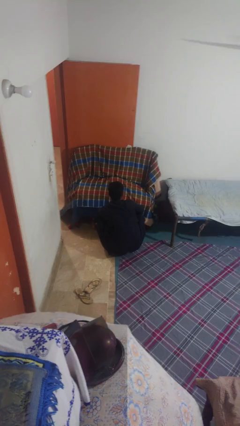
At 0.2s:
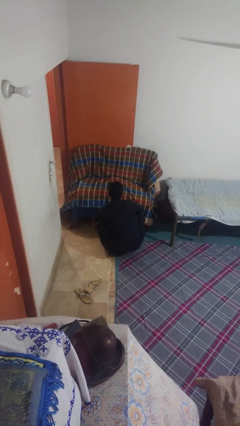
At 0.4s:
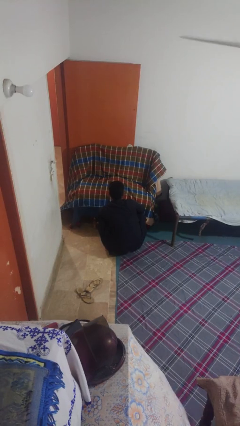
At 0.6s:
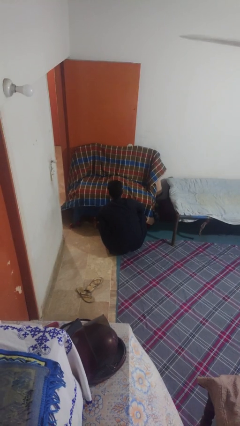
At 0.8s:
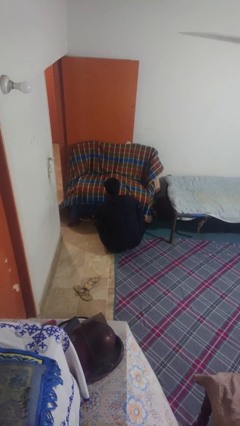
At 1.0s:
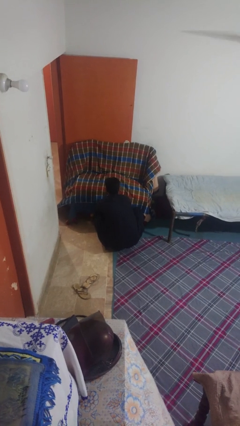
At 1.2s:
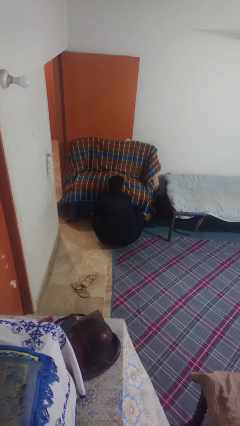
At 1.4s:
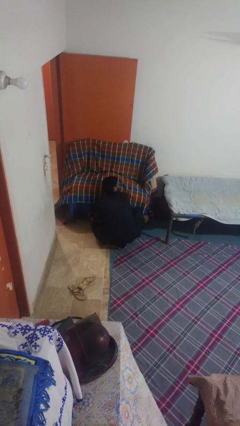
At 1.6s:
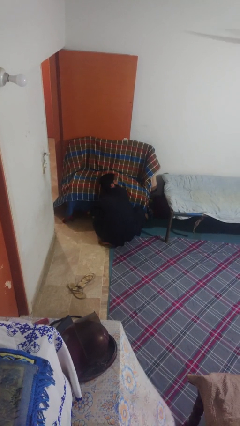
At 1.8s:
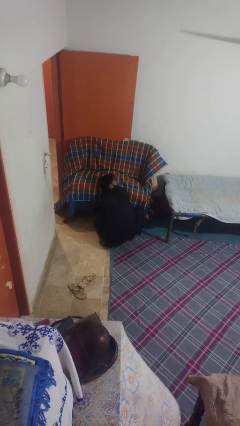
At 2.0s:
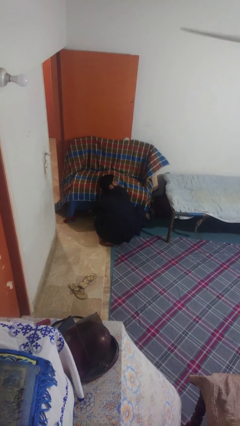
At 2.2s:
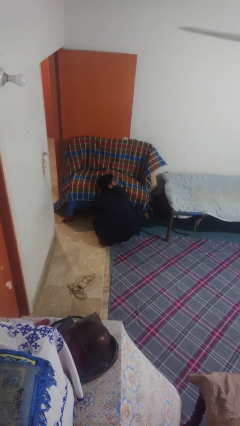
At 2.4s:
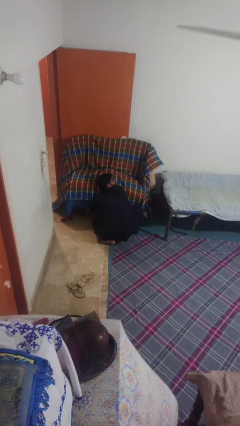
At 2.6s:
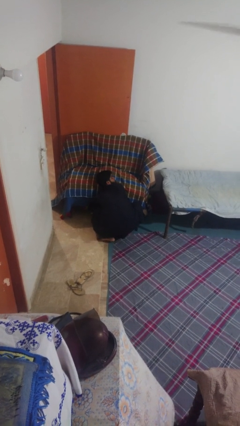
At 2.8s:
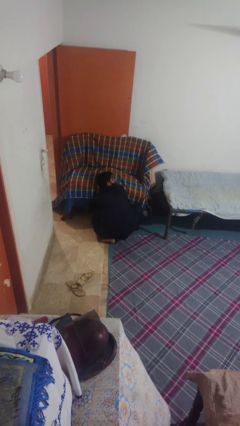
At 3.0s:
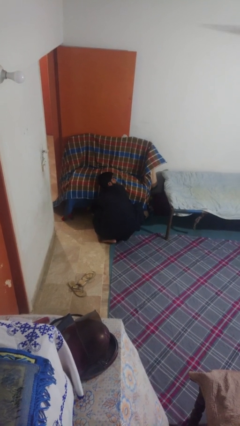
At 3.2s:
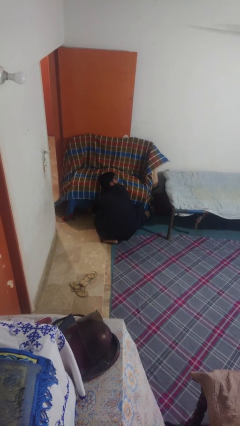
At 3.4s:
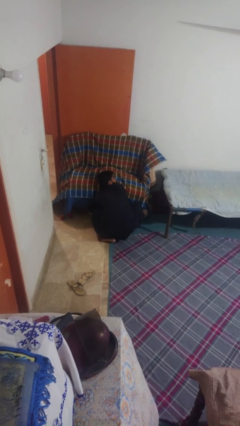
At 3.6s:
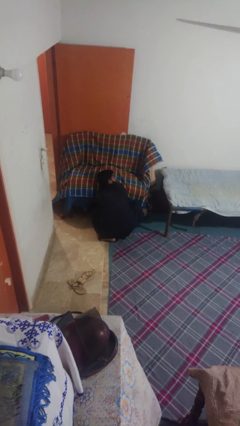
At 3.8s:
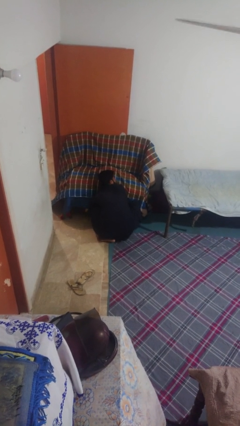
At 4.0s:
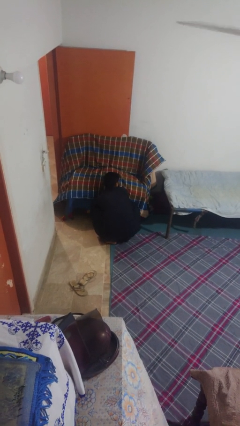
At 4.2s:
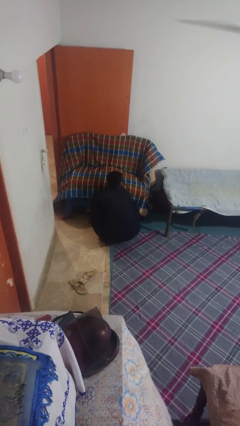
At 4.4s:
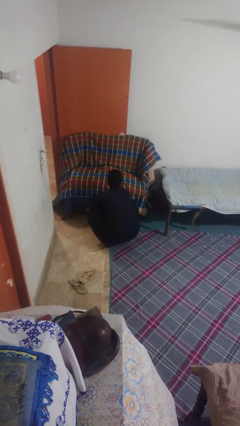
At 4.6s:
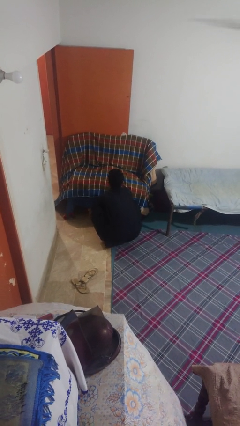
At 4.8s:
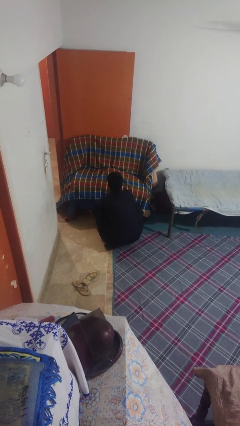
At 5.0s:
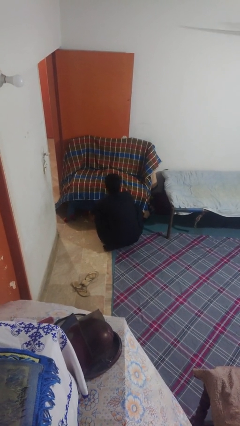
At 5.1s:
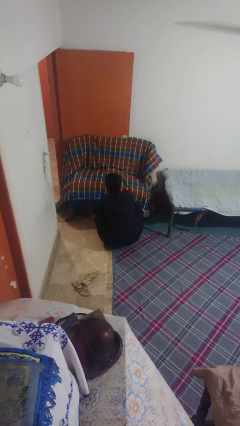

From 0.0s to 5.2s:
person searches under couch

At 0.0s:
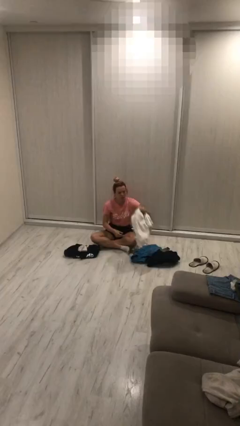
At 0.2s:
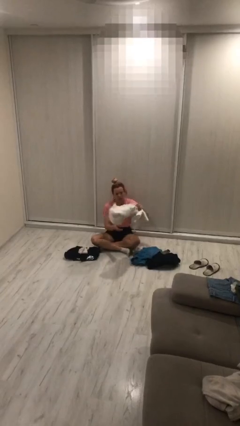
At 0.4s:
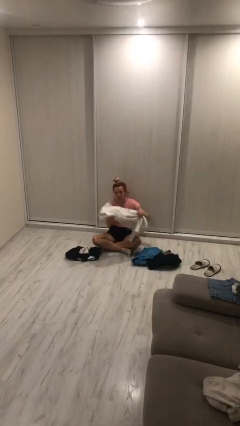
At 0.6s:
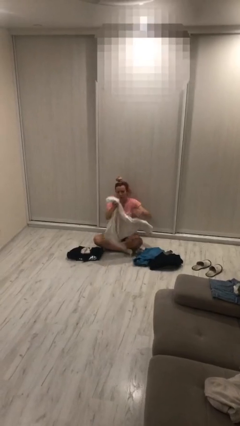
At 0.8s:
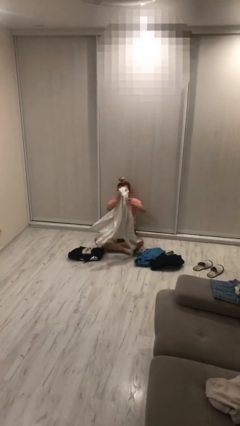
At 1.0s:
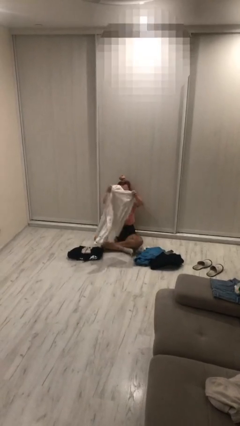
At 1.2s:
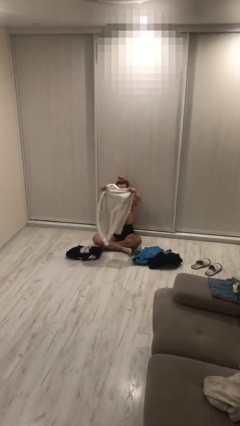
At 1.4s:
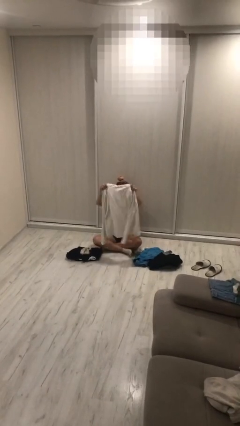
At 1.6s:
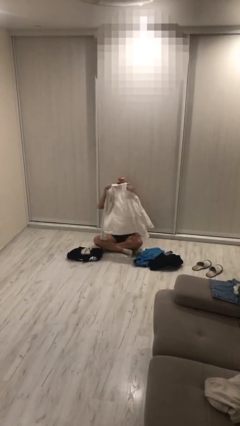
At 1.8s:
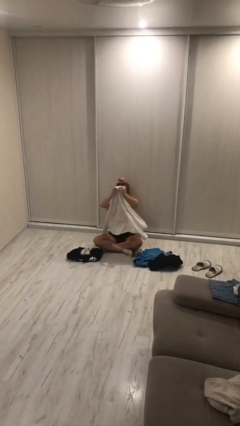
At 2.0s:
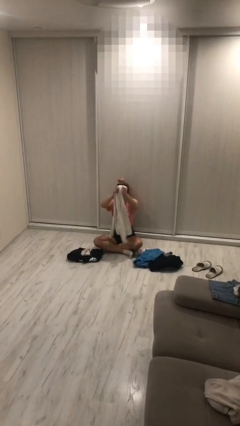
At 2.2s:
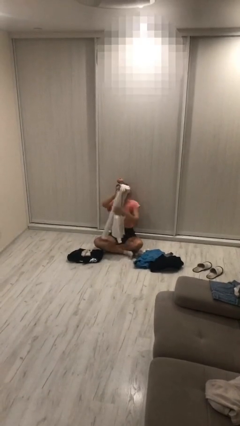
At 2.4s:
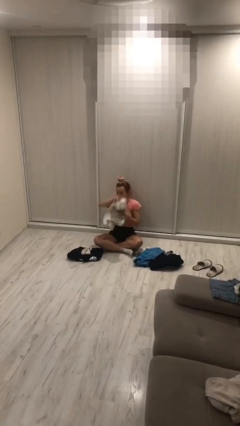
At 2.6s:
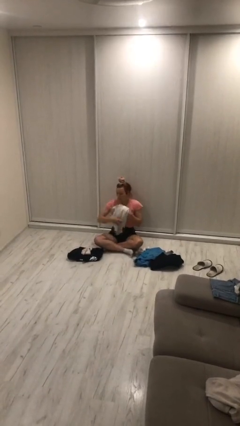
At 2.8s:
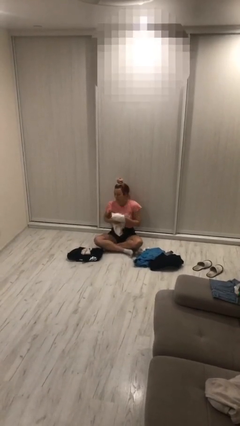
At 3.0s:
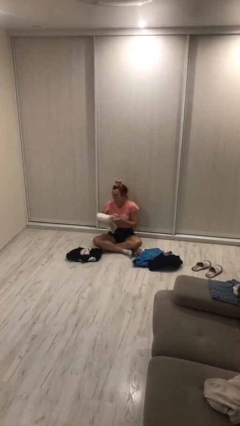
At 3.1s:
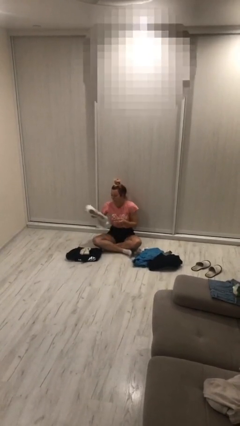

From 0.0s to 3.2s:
person folds shirt

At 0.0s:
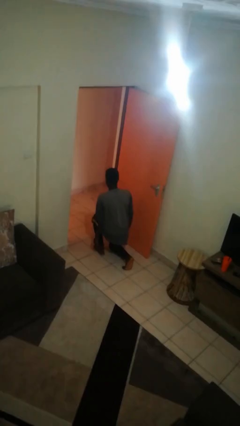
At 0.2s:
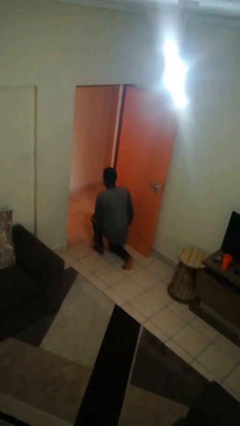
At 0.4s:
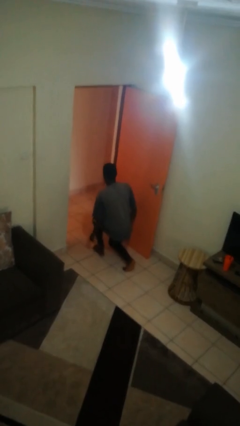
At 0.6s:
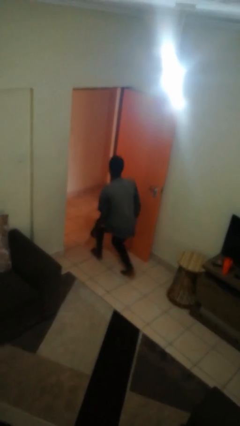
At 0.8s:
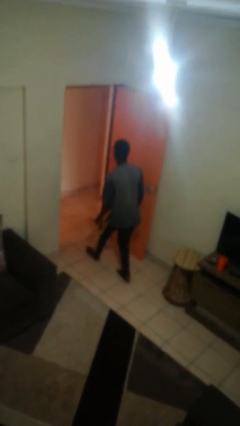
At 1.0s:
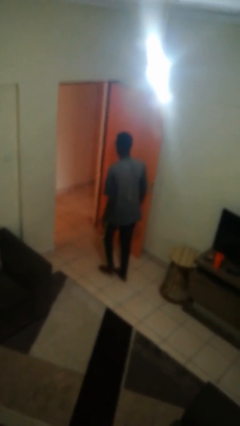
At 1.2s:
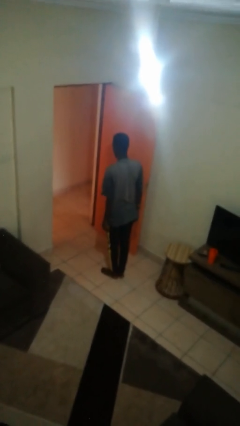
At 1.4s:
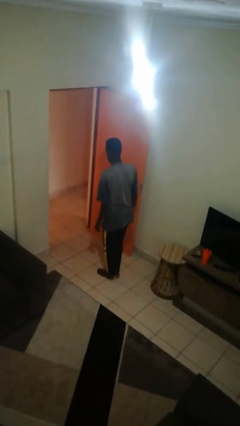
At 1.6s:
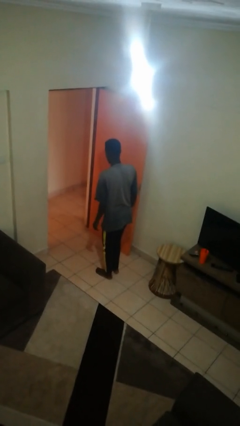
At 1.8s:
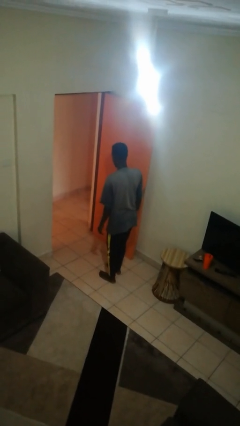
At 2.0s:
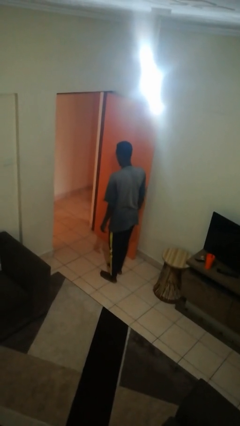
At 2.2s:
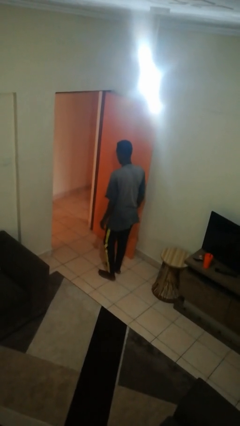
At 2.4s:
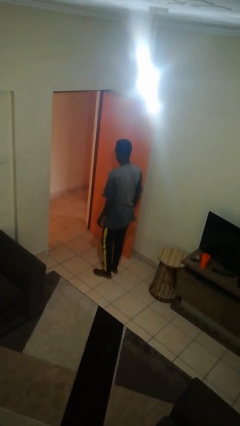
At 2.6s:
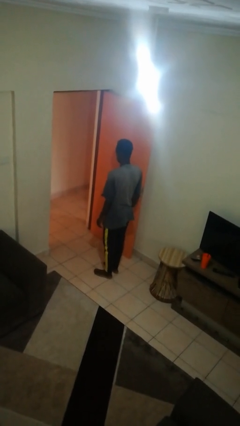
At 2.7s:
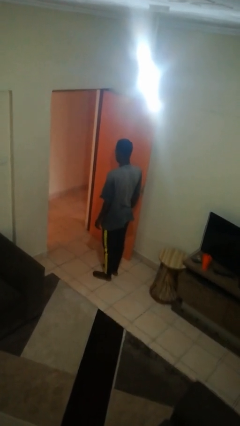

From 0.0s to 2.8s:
person stands up from floor

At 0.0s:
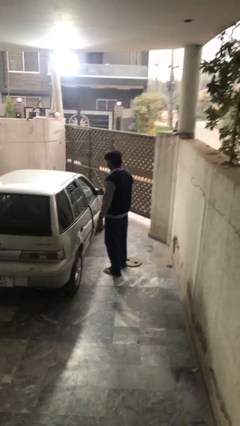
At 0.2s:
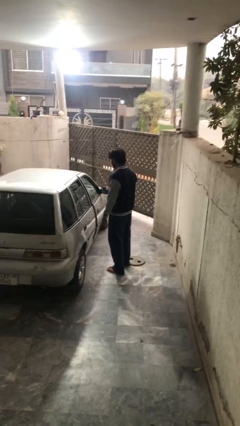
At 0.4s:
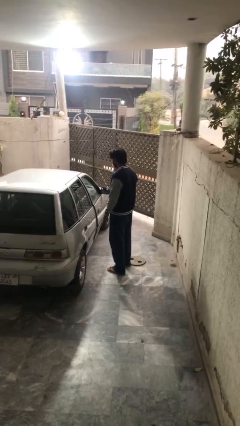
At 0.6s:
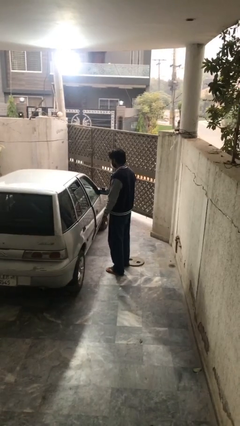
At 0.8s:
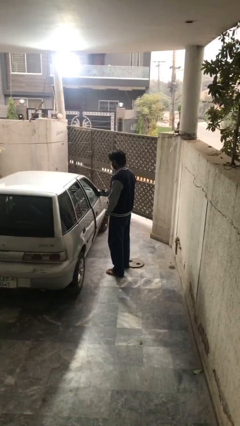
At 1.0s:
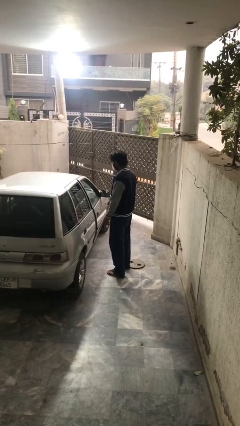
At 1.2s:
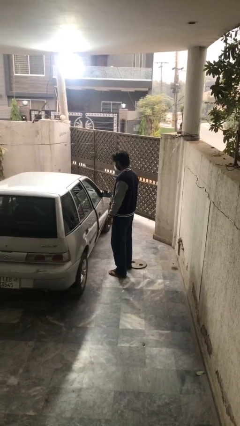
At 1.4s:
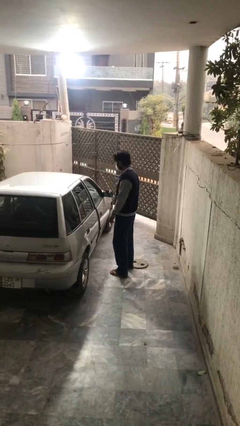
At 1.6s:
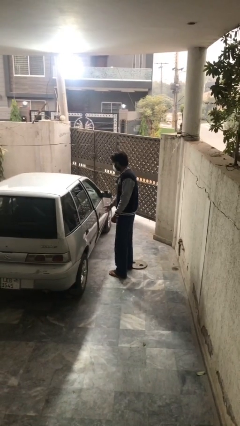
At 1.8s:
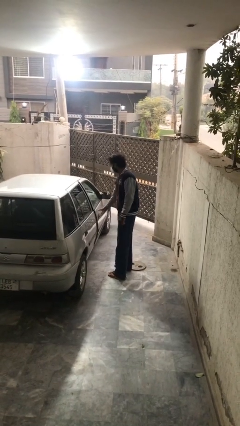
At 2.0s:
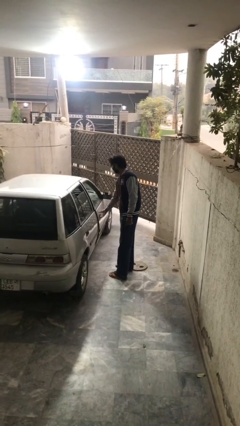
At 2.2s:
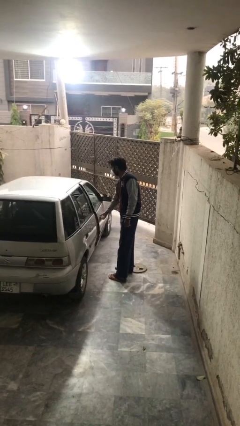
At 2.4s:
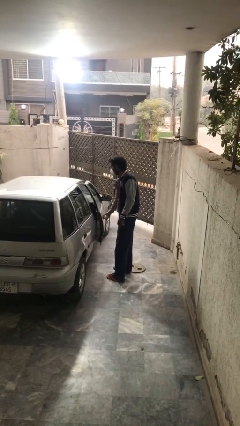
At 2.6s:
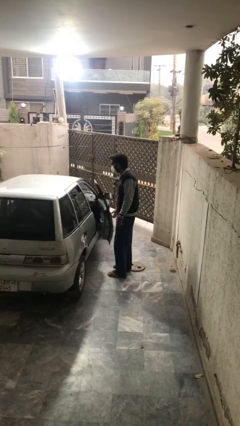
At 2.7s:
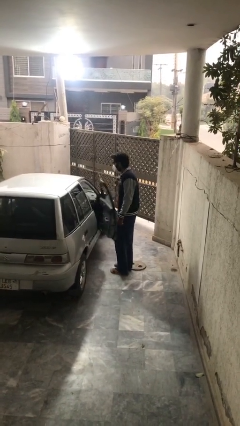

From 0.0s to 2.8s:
person opens car door

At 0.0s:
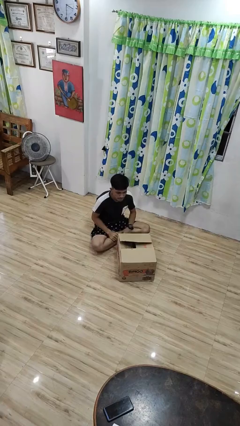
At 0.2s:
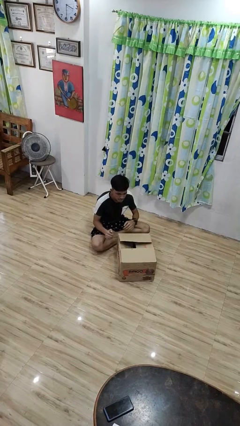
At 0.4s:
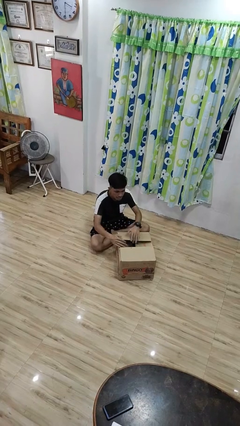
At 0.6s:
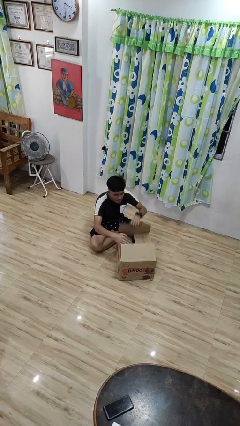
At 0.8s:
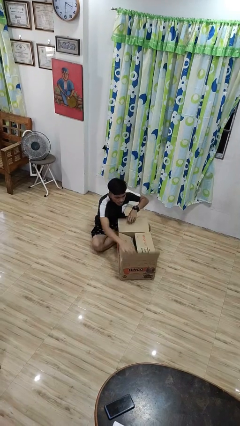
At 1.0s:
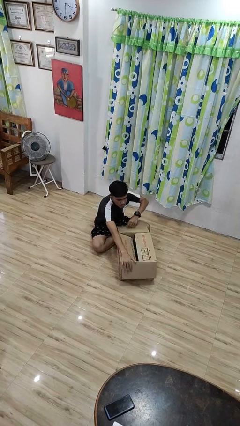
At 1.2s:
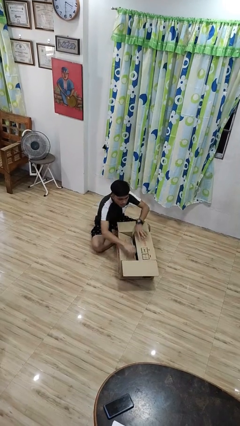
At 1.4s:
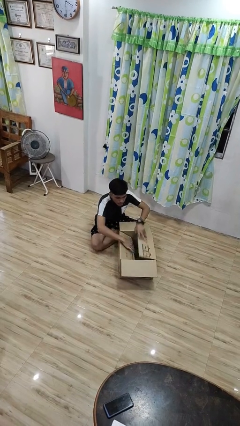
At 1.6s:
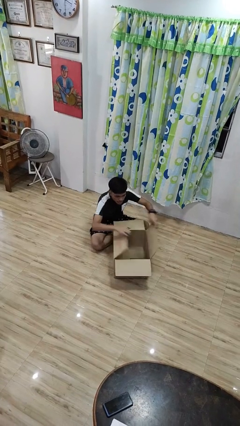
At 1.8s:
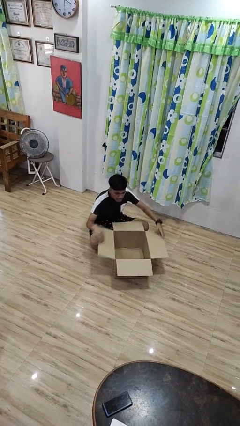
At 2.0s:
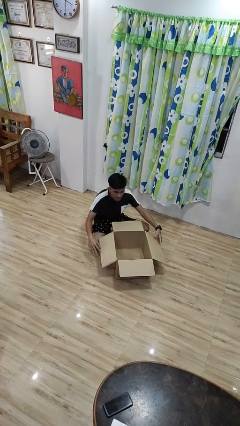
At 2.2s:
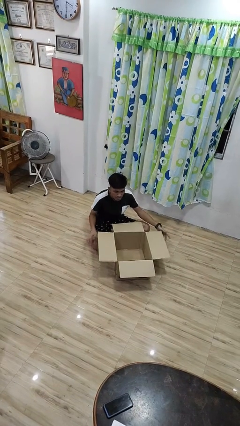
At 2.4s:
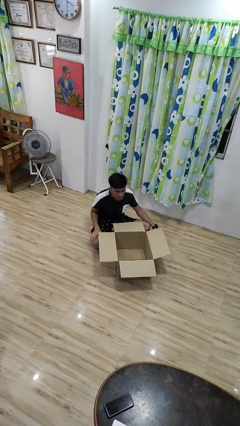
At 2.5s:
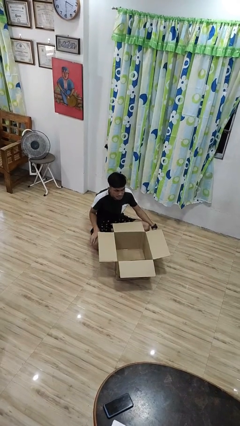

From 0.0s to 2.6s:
person opens box

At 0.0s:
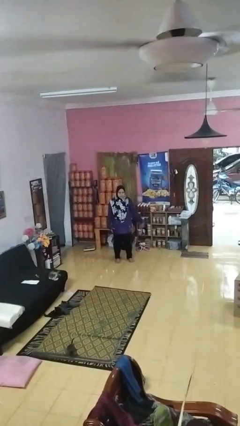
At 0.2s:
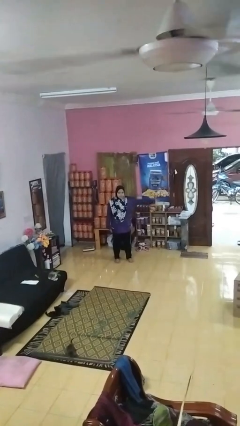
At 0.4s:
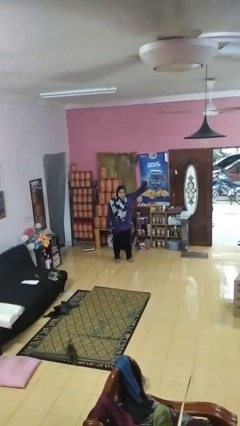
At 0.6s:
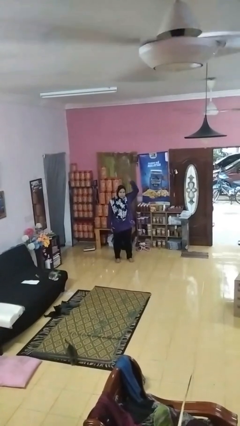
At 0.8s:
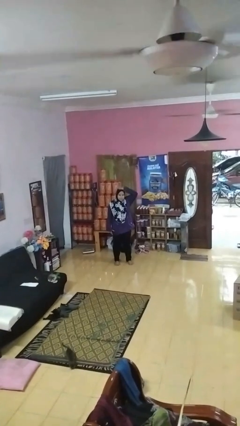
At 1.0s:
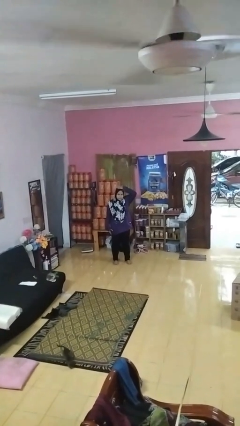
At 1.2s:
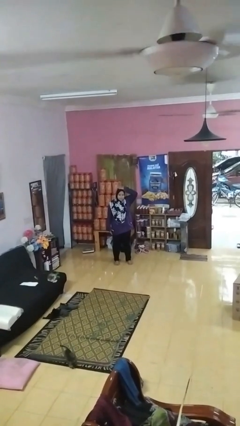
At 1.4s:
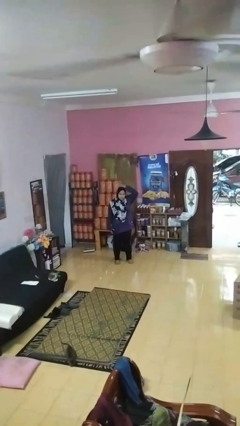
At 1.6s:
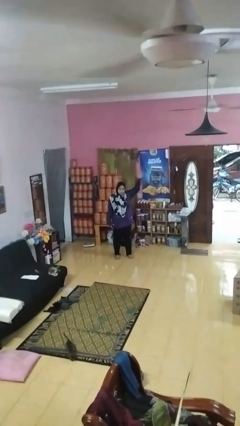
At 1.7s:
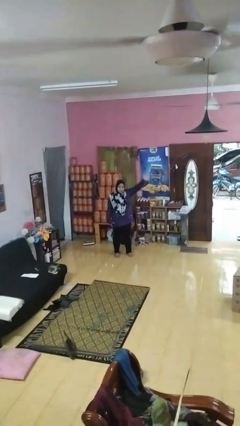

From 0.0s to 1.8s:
person pats head
